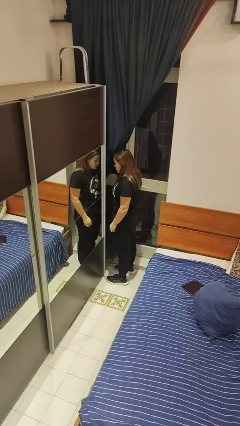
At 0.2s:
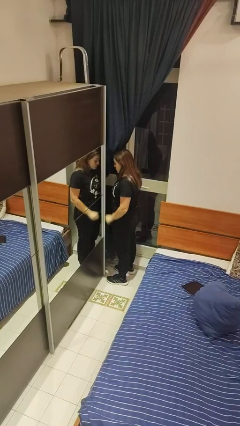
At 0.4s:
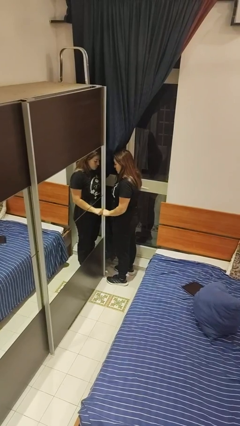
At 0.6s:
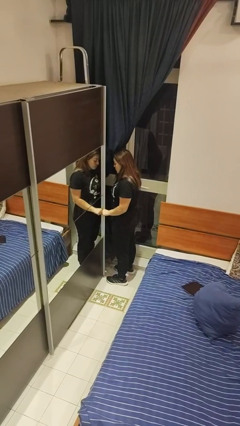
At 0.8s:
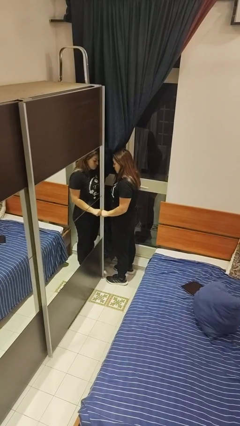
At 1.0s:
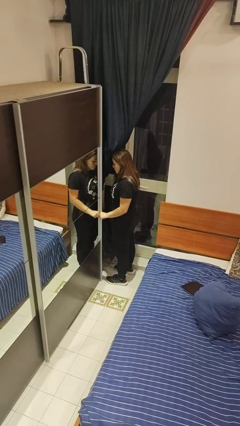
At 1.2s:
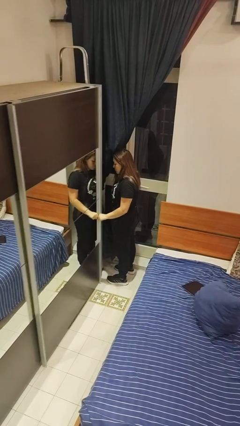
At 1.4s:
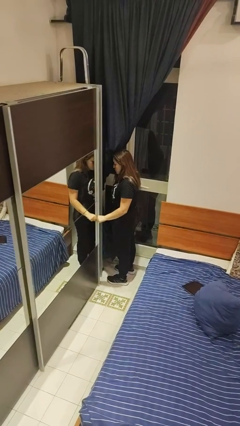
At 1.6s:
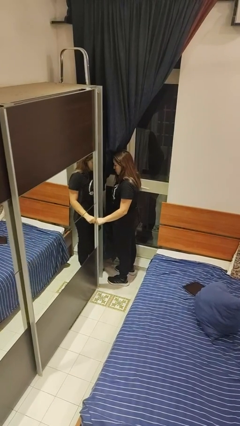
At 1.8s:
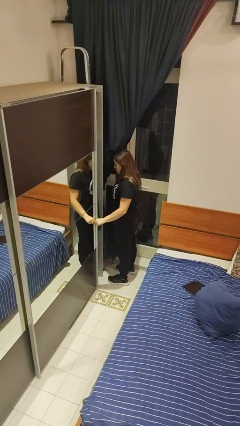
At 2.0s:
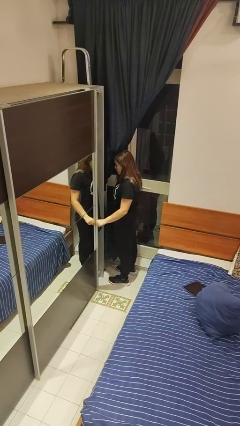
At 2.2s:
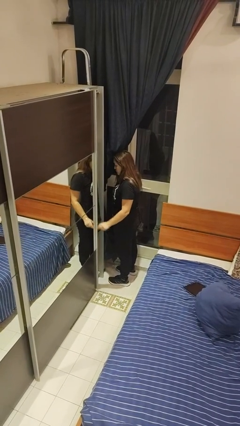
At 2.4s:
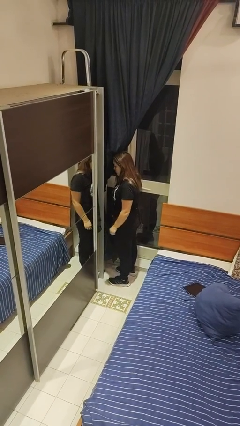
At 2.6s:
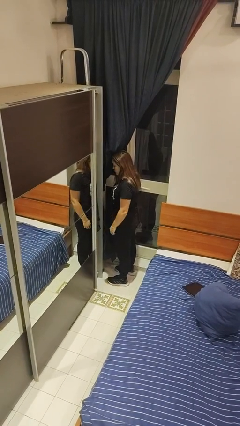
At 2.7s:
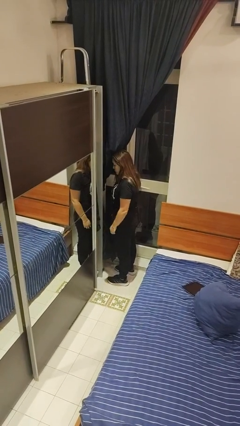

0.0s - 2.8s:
person opens closet door

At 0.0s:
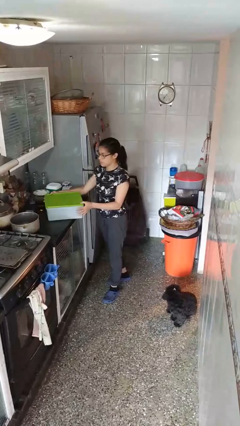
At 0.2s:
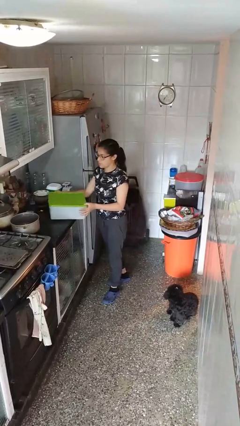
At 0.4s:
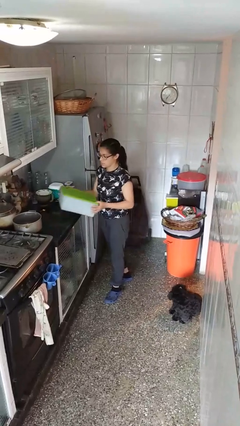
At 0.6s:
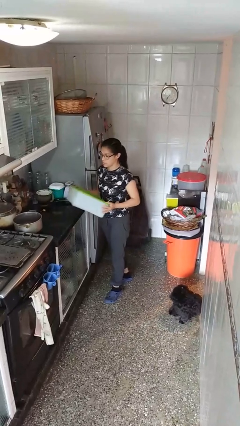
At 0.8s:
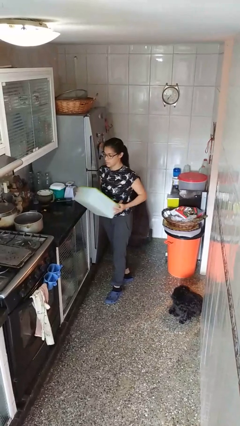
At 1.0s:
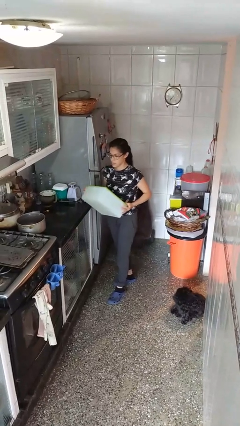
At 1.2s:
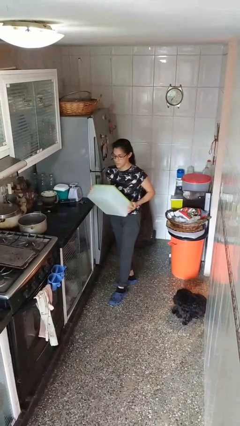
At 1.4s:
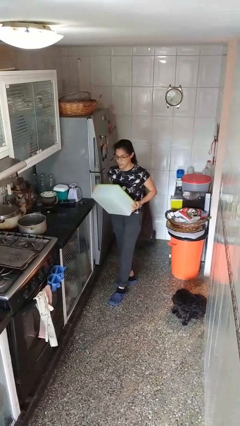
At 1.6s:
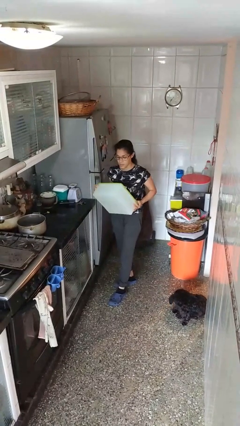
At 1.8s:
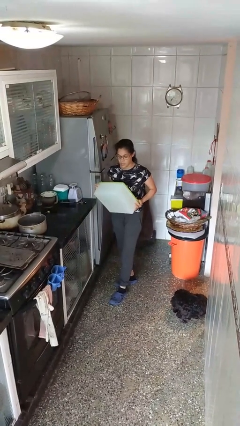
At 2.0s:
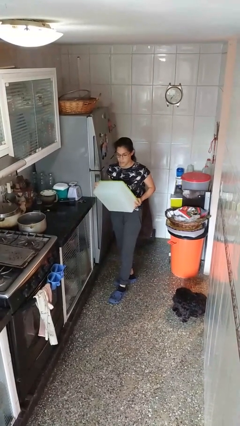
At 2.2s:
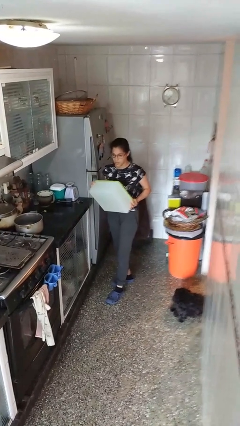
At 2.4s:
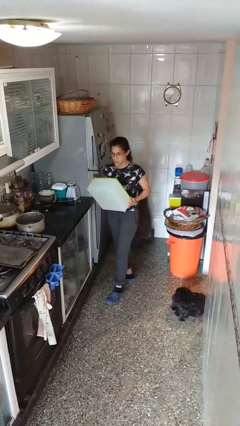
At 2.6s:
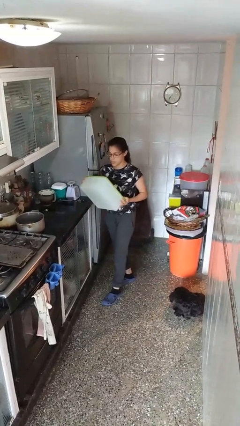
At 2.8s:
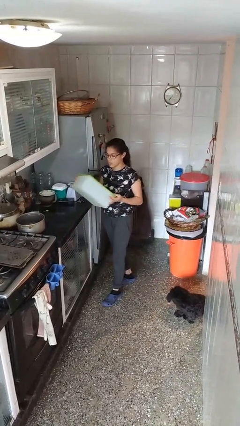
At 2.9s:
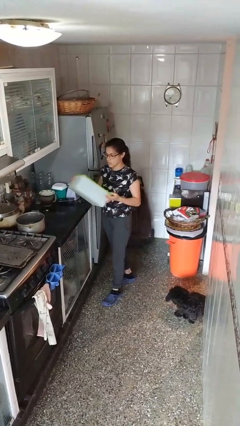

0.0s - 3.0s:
person picks up object from countertop

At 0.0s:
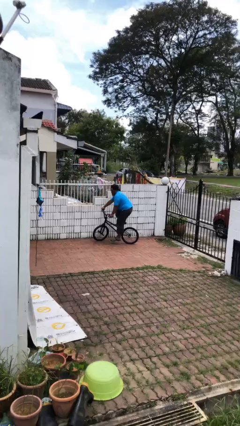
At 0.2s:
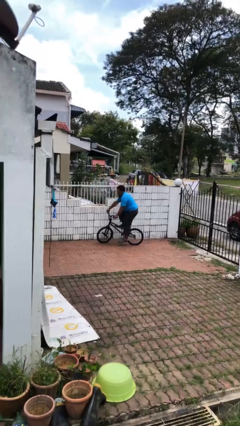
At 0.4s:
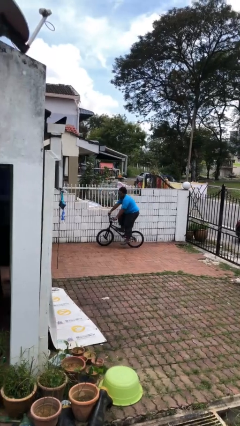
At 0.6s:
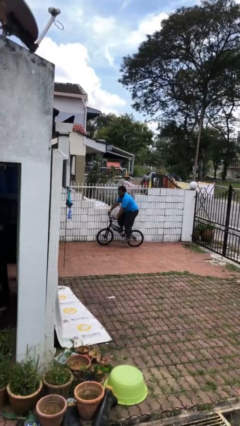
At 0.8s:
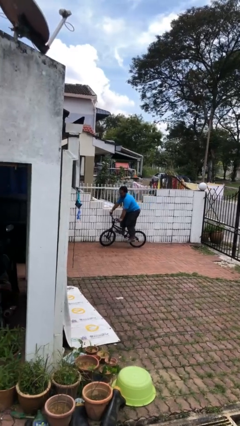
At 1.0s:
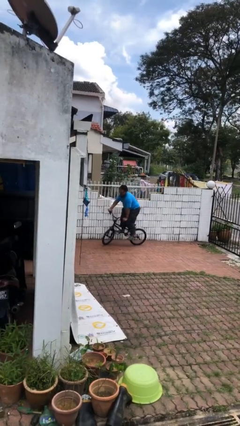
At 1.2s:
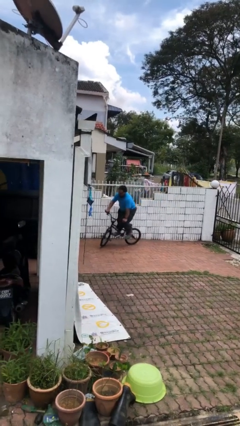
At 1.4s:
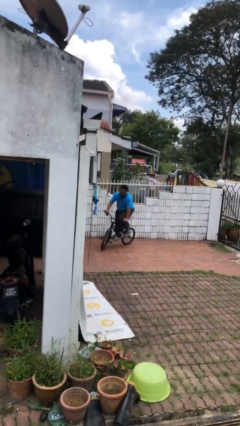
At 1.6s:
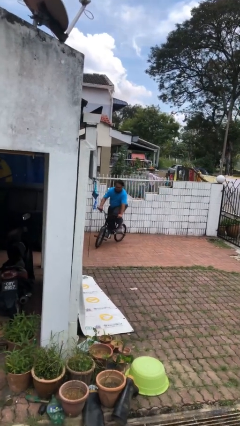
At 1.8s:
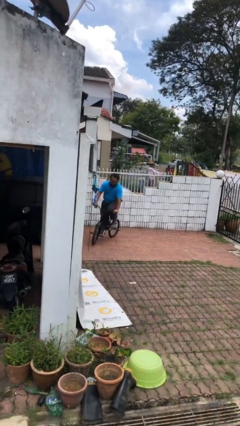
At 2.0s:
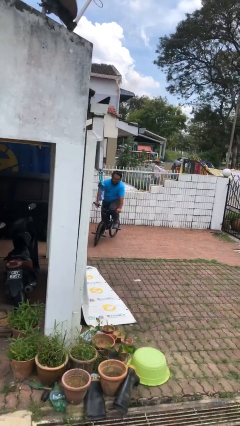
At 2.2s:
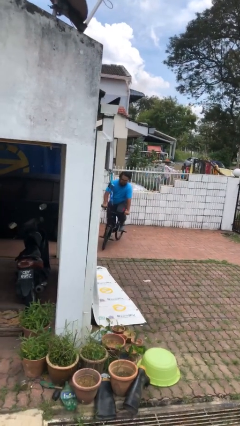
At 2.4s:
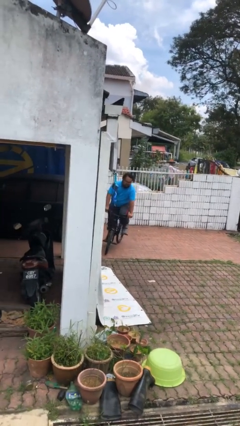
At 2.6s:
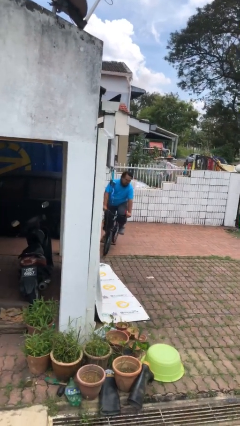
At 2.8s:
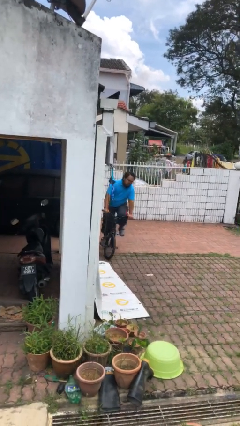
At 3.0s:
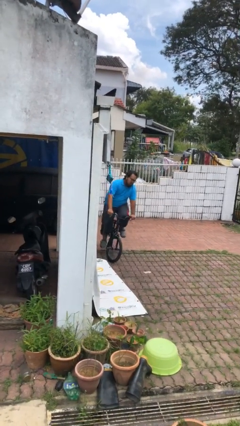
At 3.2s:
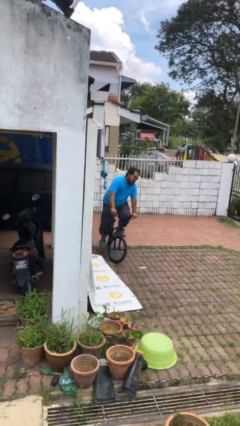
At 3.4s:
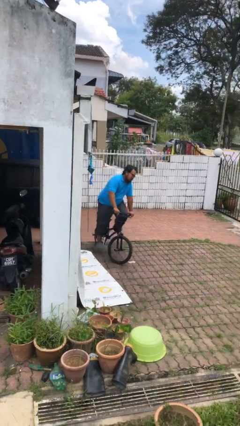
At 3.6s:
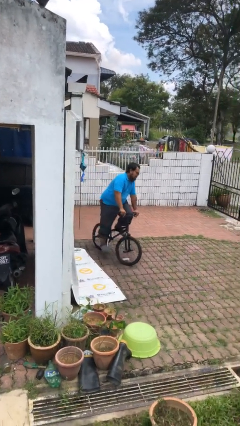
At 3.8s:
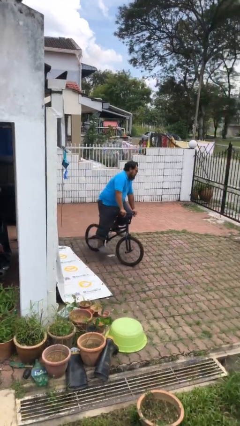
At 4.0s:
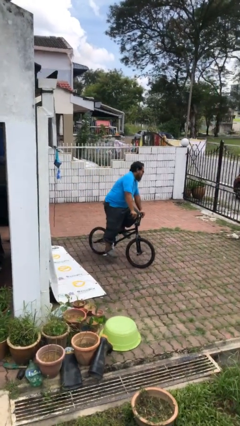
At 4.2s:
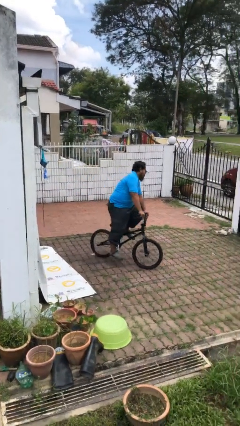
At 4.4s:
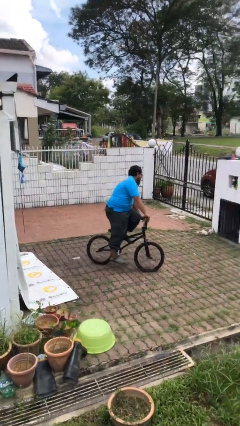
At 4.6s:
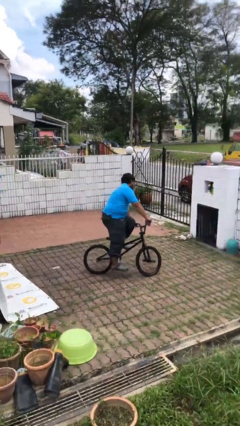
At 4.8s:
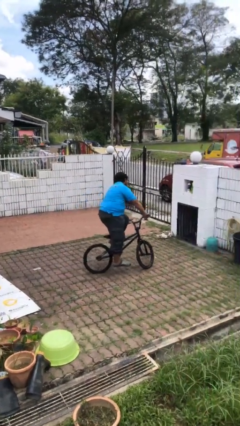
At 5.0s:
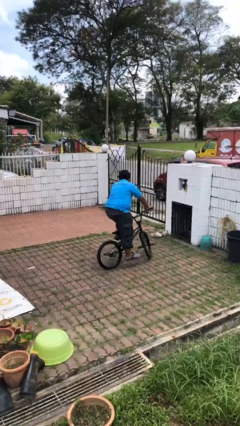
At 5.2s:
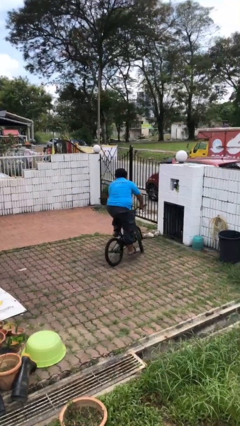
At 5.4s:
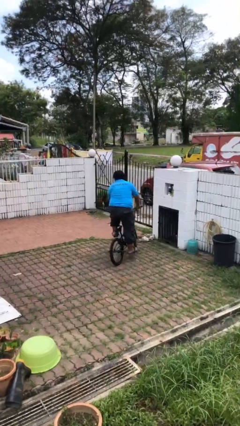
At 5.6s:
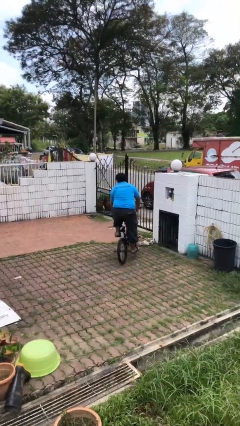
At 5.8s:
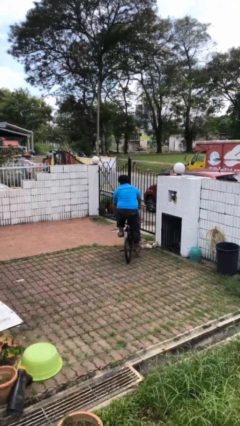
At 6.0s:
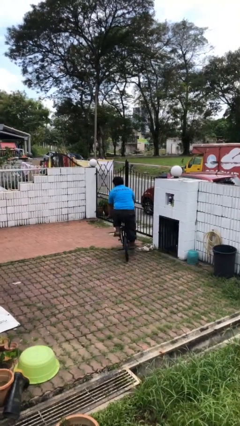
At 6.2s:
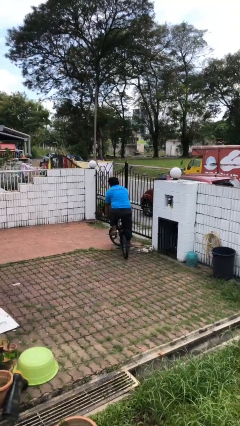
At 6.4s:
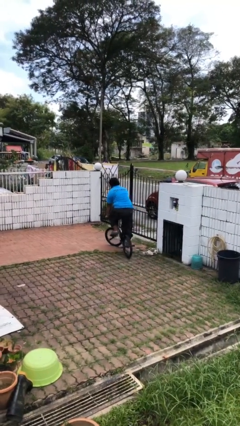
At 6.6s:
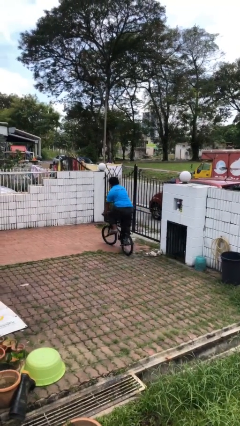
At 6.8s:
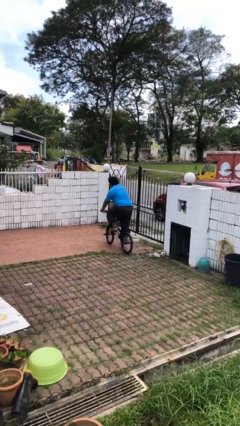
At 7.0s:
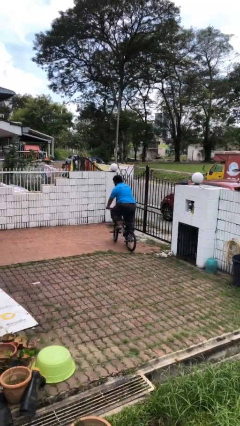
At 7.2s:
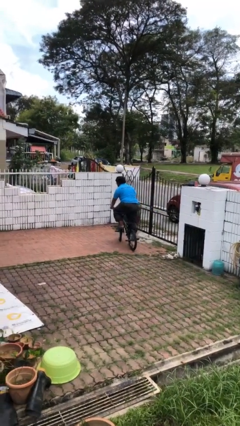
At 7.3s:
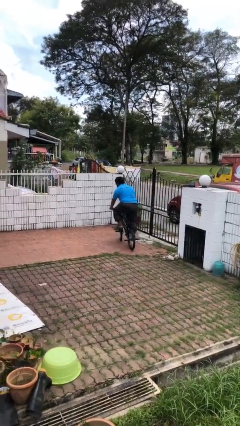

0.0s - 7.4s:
person rides bicycle

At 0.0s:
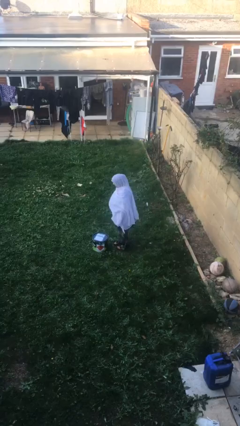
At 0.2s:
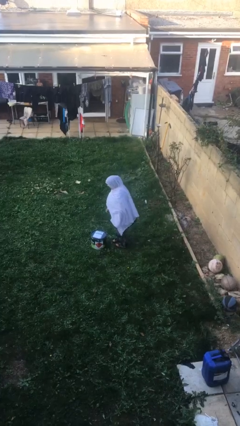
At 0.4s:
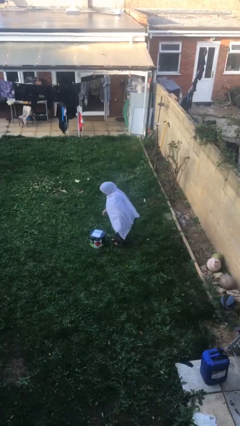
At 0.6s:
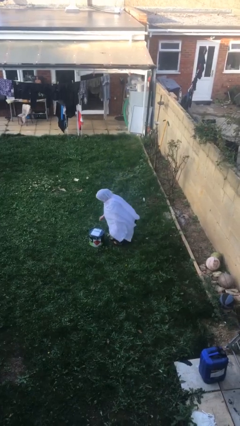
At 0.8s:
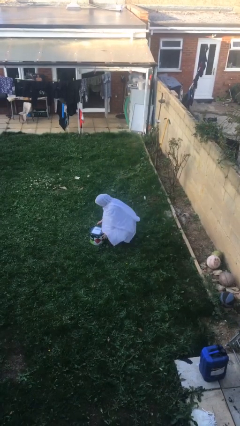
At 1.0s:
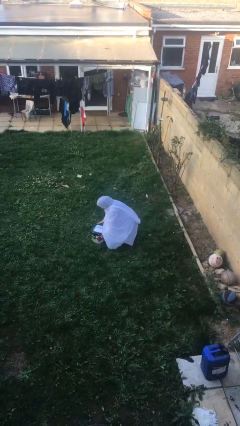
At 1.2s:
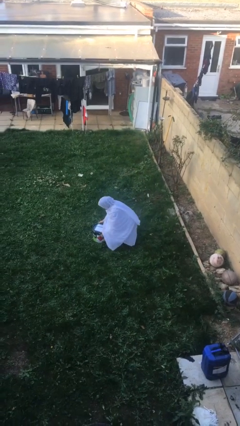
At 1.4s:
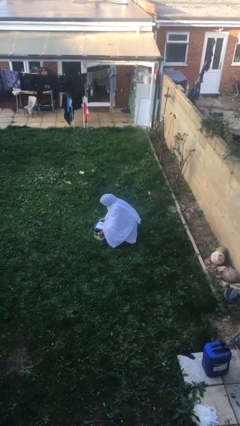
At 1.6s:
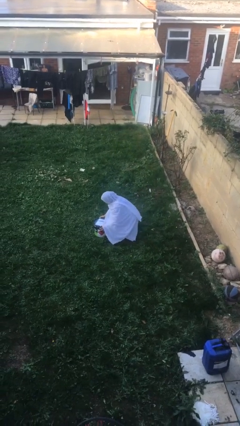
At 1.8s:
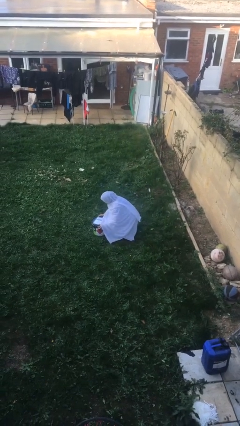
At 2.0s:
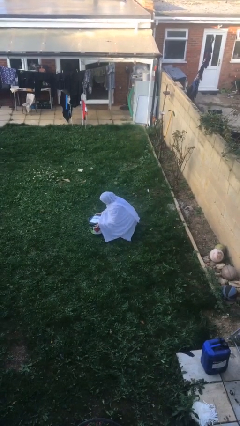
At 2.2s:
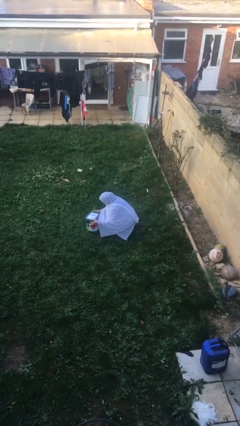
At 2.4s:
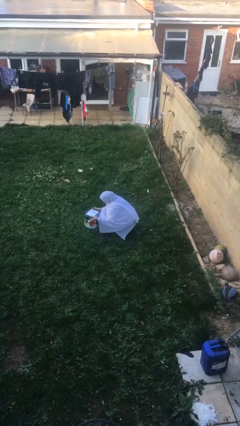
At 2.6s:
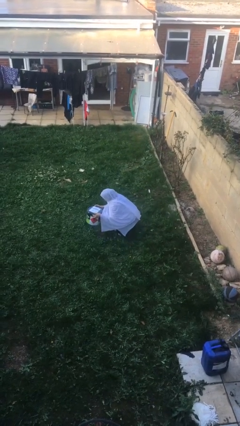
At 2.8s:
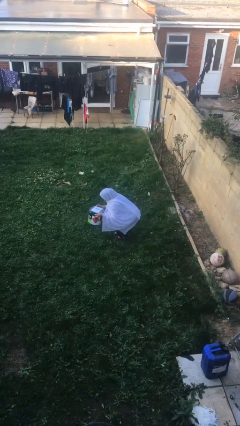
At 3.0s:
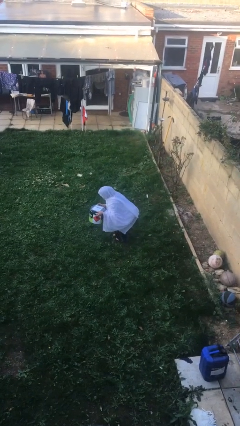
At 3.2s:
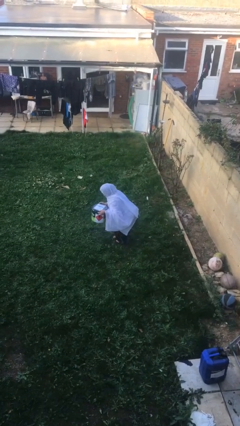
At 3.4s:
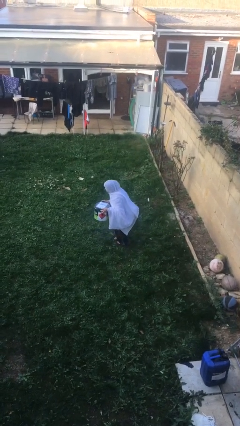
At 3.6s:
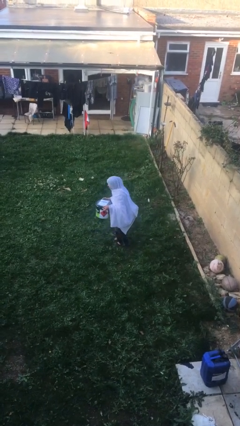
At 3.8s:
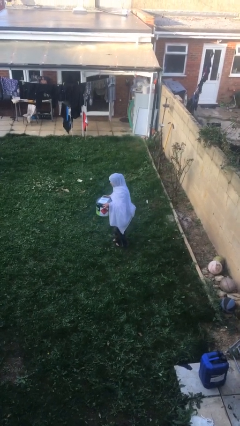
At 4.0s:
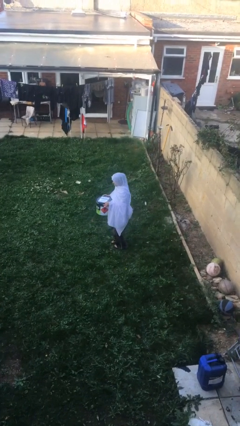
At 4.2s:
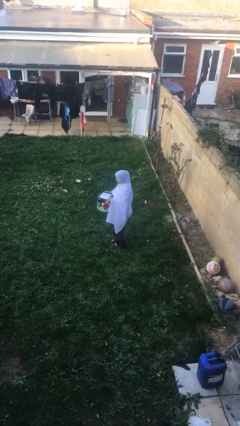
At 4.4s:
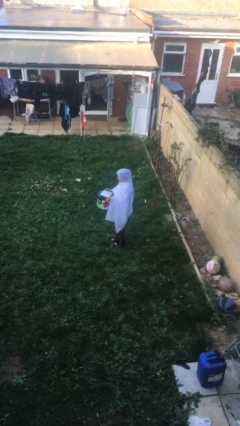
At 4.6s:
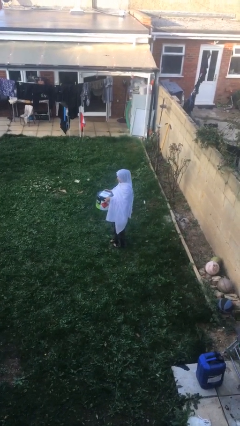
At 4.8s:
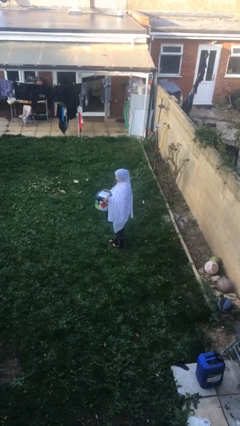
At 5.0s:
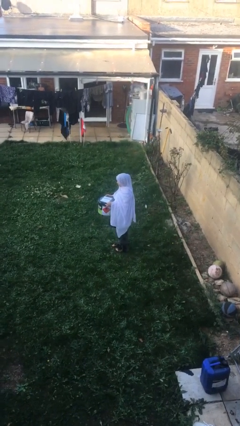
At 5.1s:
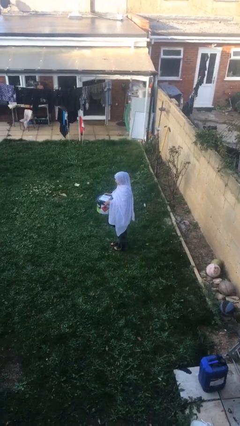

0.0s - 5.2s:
person picks up object from floor
